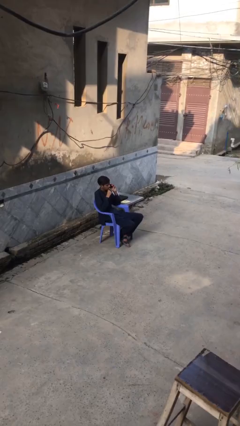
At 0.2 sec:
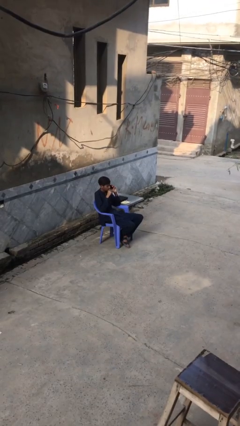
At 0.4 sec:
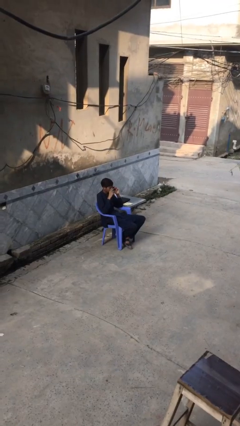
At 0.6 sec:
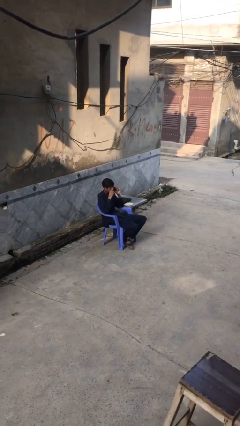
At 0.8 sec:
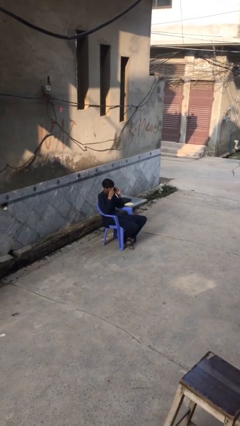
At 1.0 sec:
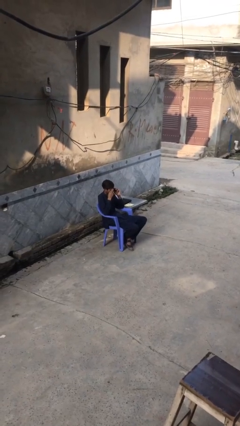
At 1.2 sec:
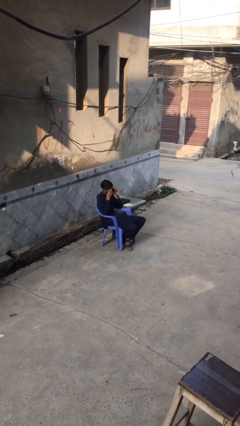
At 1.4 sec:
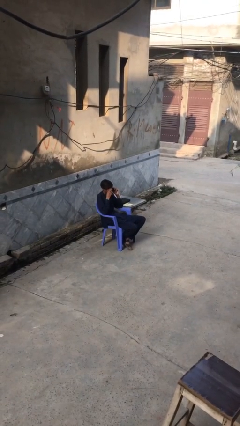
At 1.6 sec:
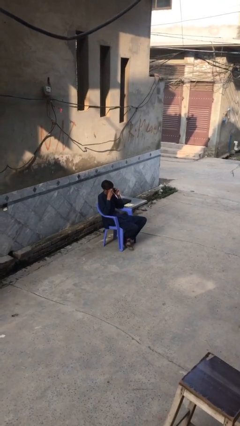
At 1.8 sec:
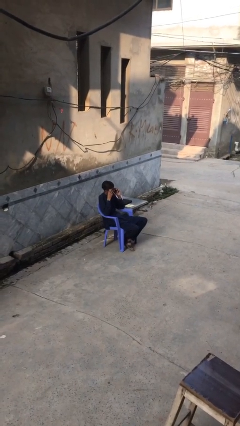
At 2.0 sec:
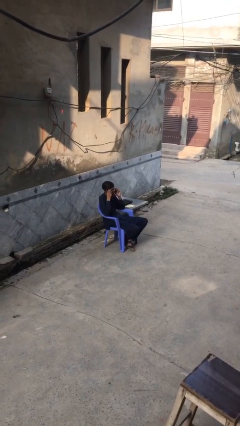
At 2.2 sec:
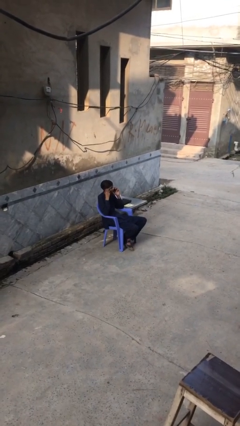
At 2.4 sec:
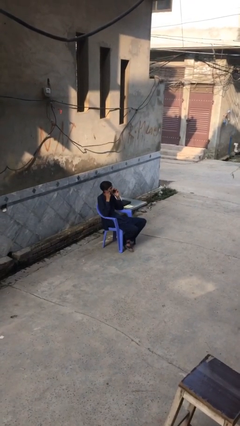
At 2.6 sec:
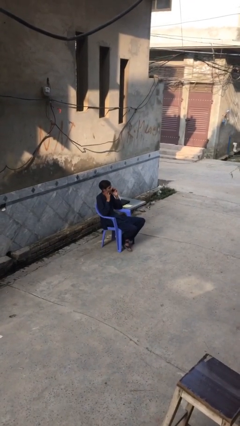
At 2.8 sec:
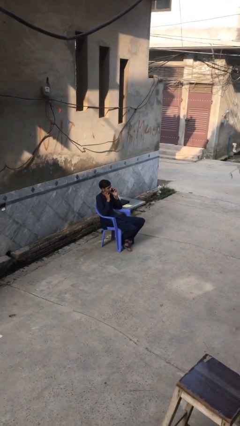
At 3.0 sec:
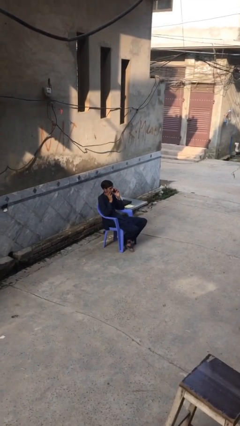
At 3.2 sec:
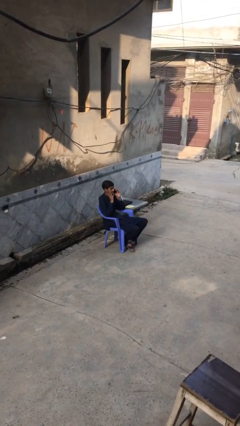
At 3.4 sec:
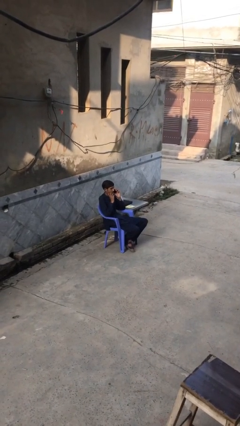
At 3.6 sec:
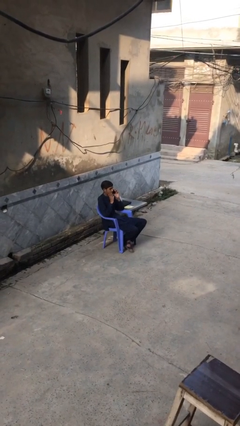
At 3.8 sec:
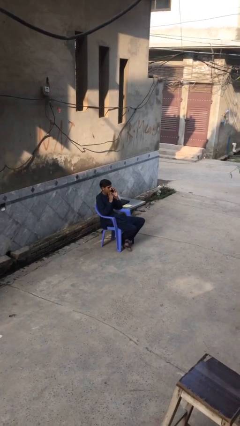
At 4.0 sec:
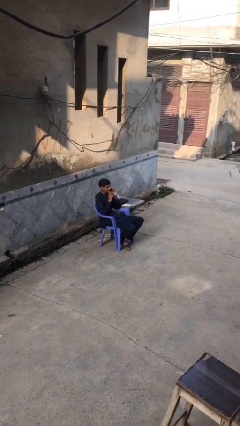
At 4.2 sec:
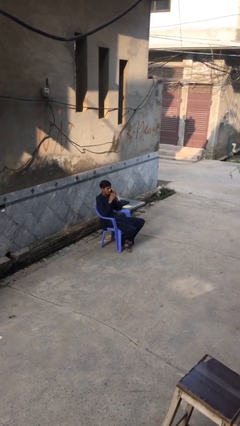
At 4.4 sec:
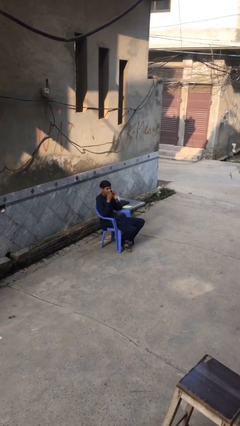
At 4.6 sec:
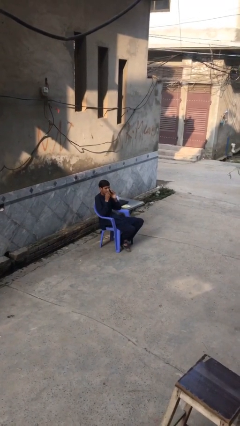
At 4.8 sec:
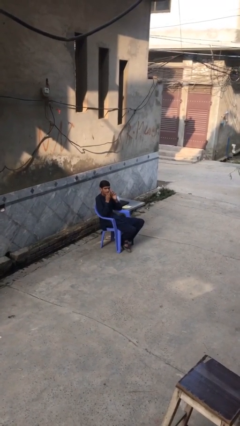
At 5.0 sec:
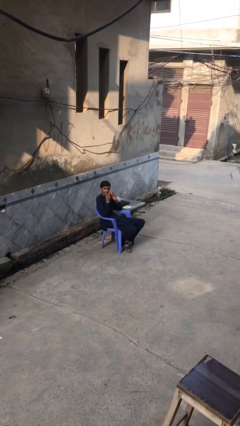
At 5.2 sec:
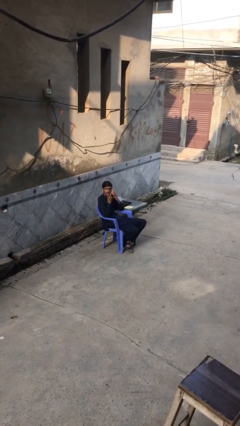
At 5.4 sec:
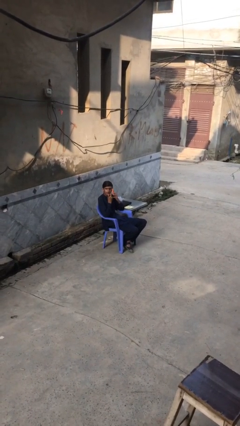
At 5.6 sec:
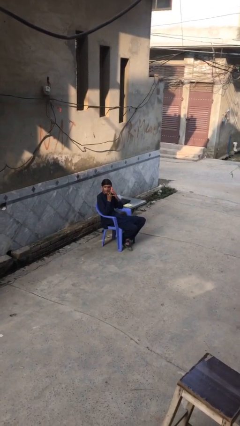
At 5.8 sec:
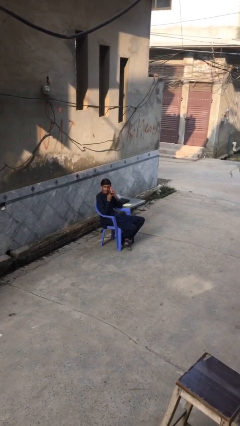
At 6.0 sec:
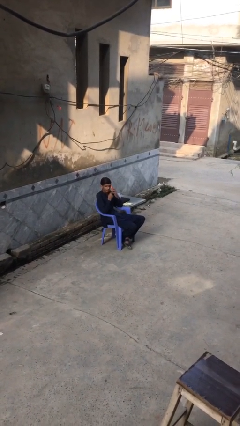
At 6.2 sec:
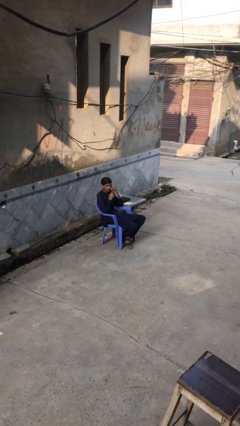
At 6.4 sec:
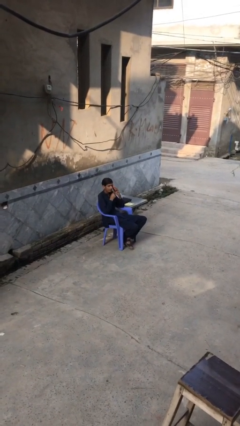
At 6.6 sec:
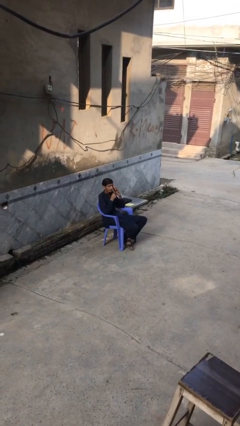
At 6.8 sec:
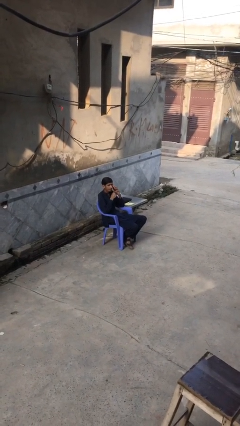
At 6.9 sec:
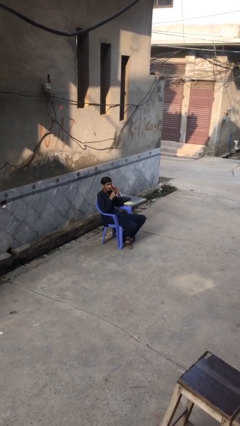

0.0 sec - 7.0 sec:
person talks on phone

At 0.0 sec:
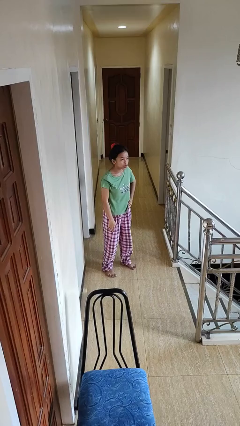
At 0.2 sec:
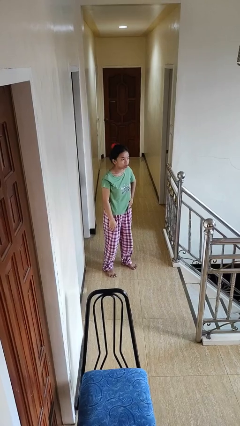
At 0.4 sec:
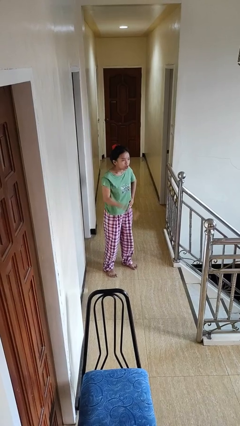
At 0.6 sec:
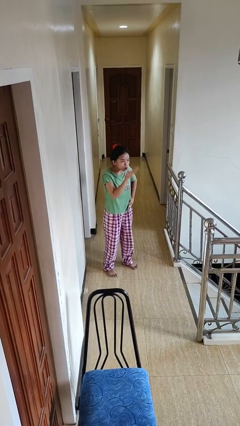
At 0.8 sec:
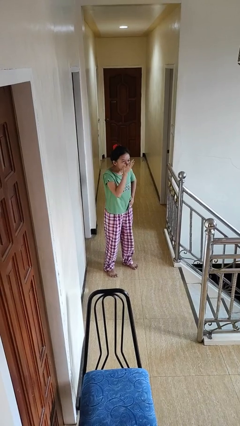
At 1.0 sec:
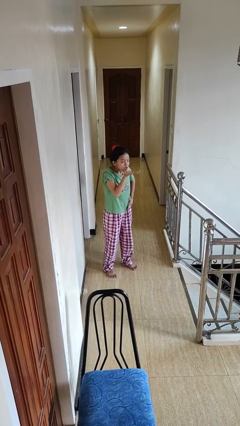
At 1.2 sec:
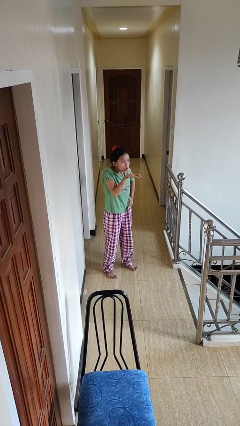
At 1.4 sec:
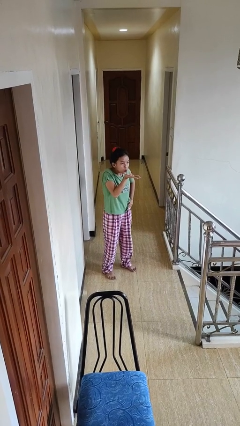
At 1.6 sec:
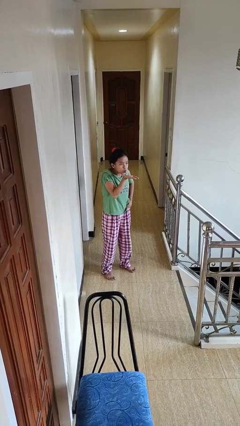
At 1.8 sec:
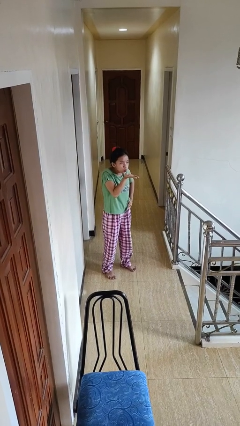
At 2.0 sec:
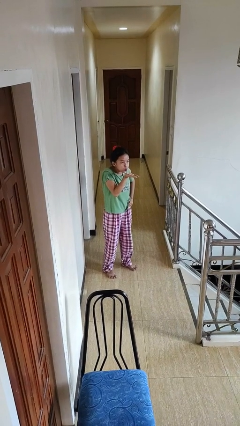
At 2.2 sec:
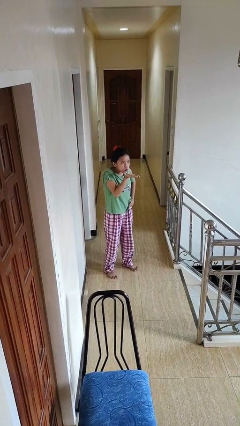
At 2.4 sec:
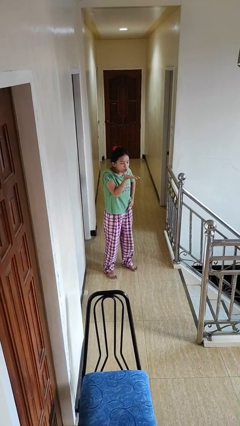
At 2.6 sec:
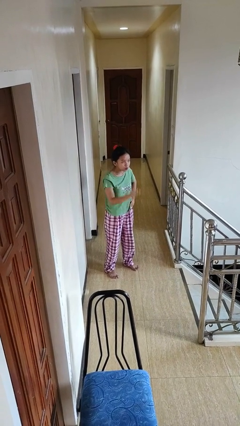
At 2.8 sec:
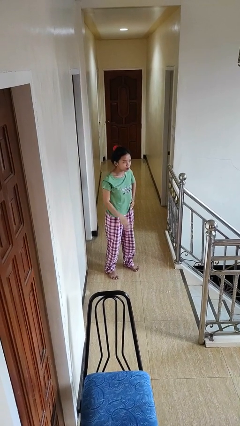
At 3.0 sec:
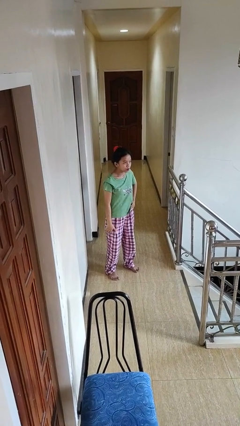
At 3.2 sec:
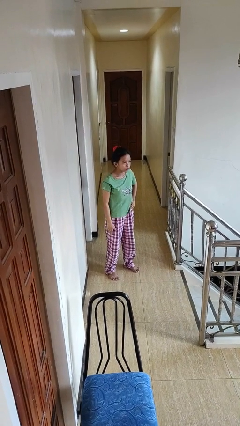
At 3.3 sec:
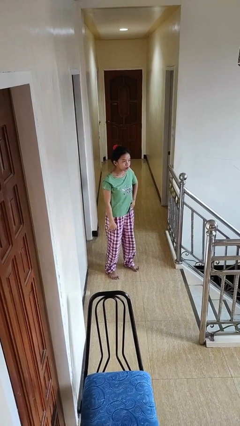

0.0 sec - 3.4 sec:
person gestures blow kiss

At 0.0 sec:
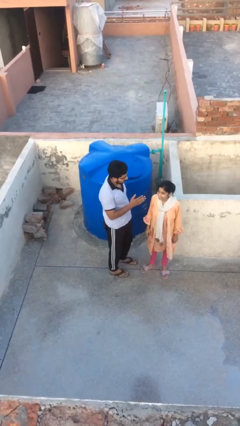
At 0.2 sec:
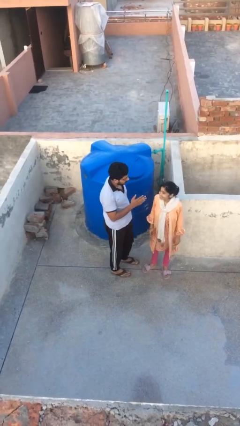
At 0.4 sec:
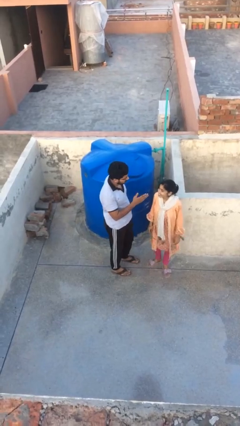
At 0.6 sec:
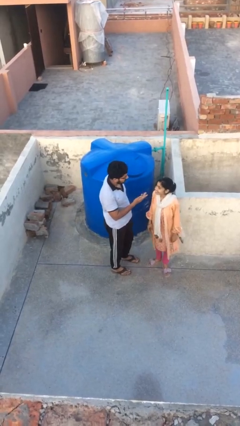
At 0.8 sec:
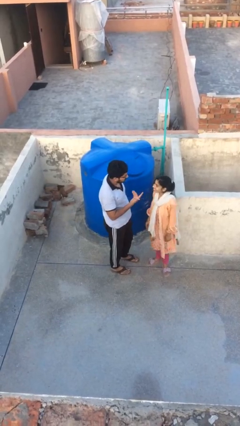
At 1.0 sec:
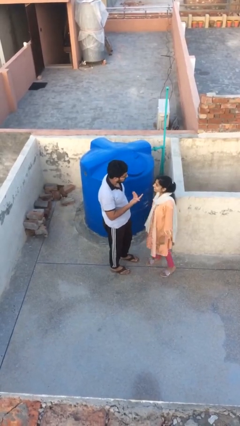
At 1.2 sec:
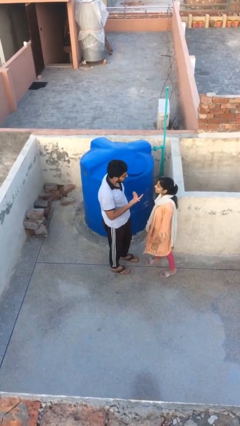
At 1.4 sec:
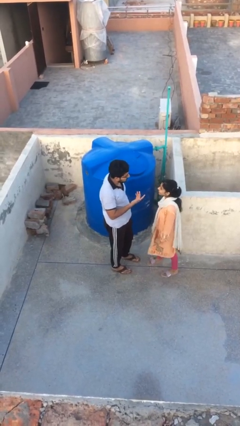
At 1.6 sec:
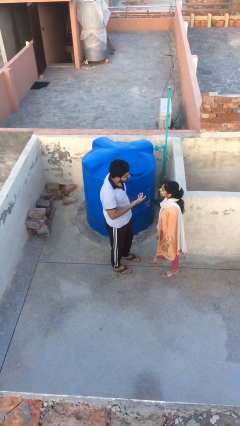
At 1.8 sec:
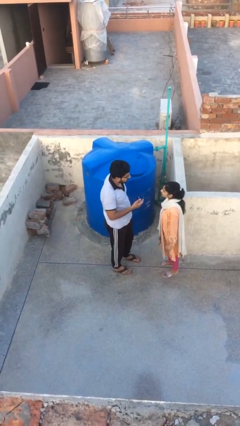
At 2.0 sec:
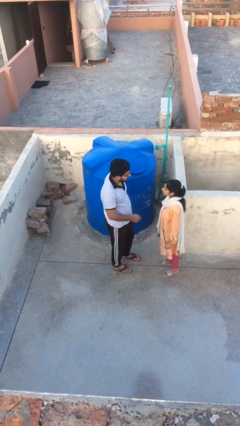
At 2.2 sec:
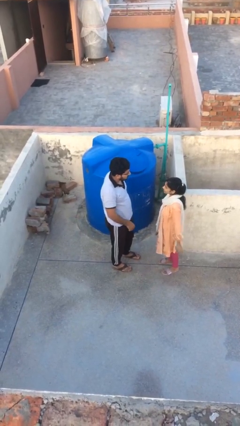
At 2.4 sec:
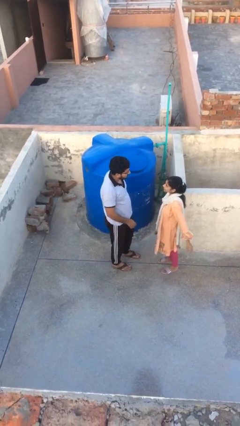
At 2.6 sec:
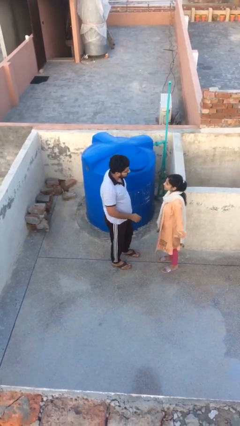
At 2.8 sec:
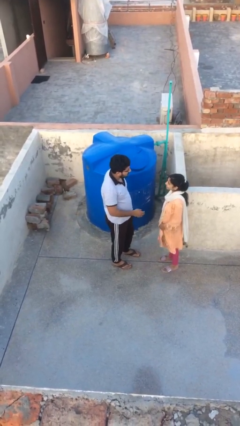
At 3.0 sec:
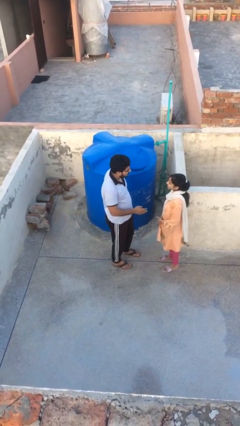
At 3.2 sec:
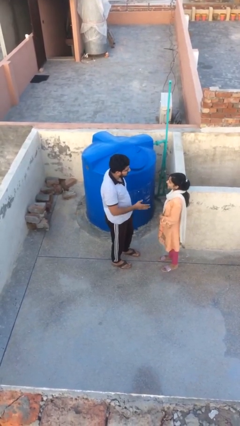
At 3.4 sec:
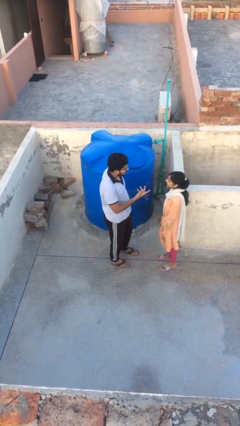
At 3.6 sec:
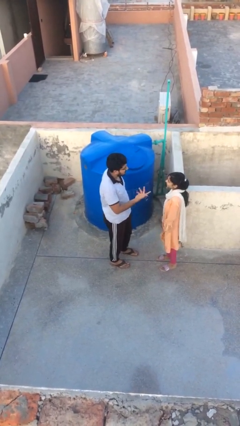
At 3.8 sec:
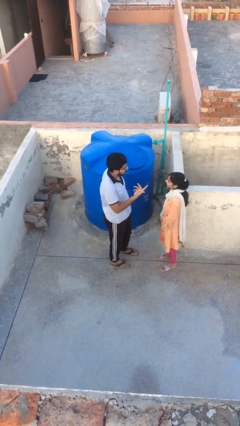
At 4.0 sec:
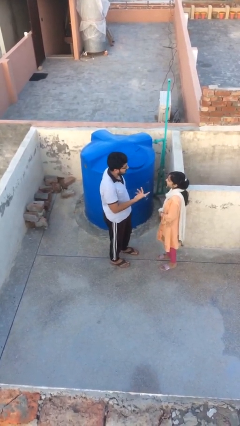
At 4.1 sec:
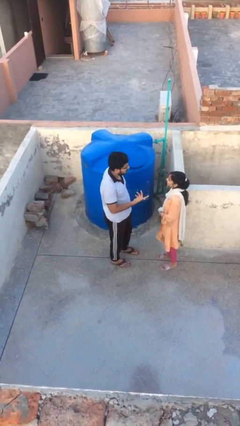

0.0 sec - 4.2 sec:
person talks to person

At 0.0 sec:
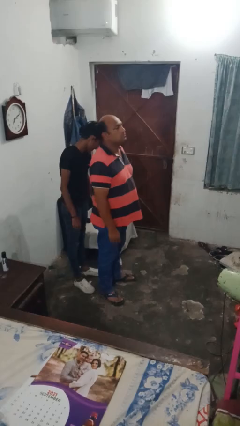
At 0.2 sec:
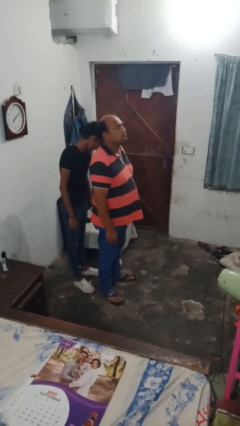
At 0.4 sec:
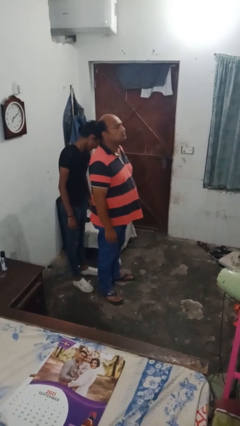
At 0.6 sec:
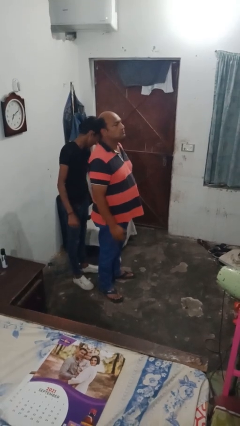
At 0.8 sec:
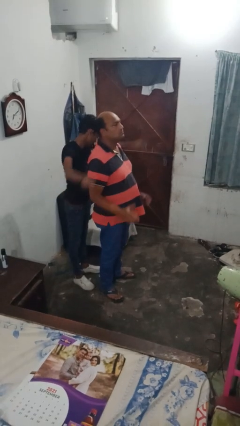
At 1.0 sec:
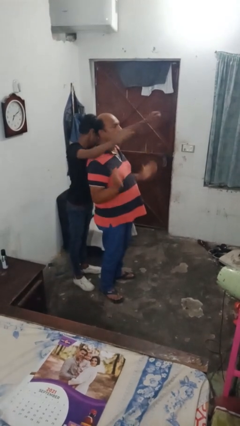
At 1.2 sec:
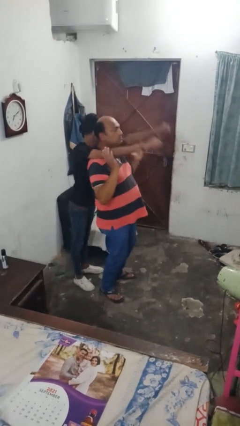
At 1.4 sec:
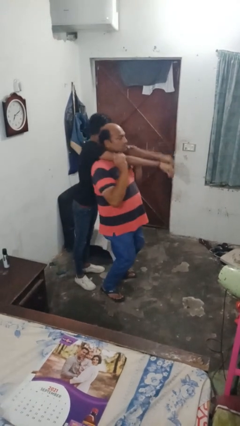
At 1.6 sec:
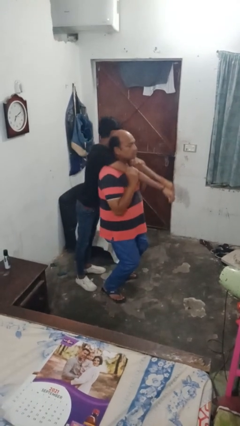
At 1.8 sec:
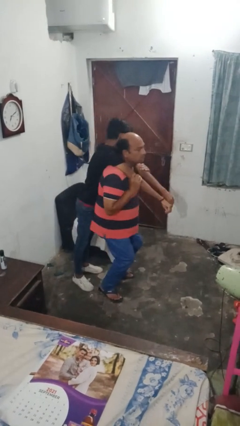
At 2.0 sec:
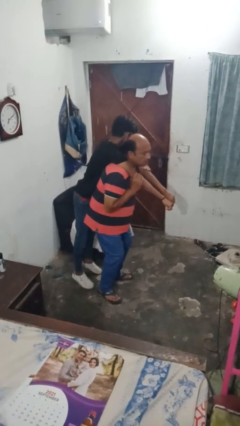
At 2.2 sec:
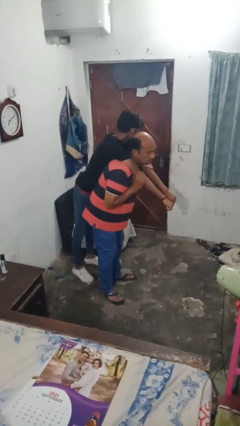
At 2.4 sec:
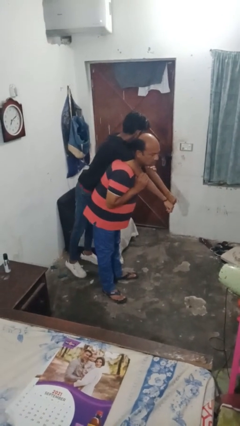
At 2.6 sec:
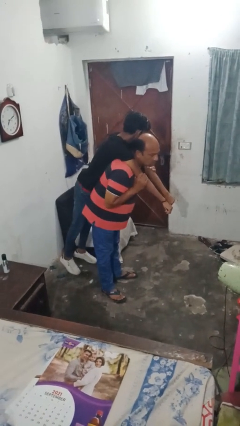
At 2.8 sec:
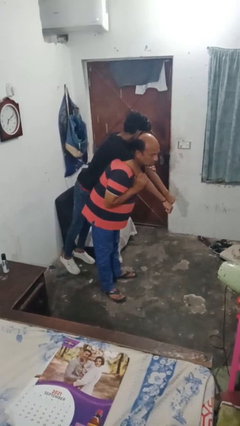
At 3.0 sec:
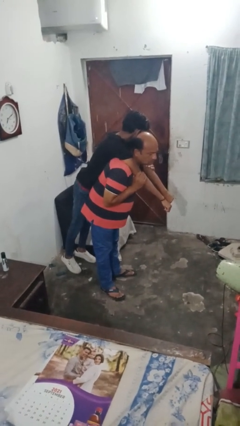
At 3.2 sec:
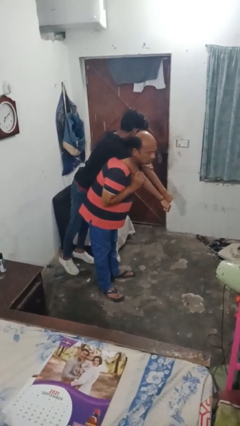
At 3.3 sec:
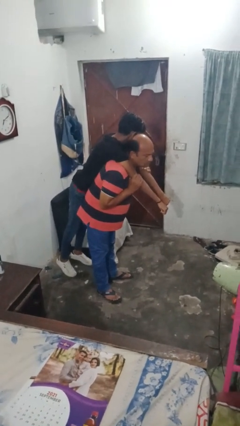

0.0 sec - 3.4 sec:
person carries person on shoulders
